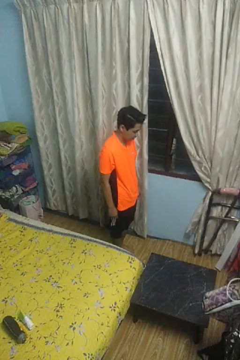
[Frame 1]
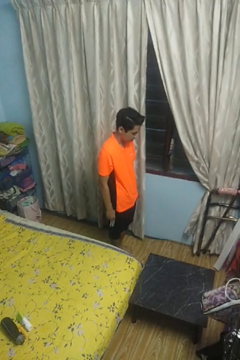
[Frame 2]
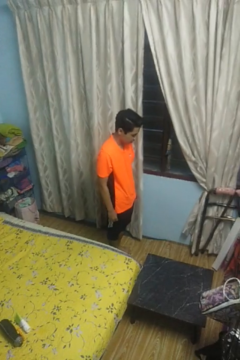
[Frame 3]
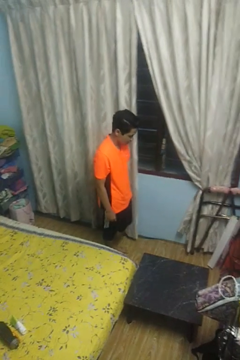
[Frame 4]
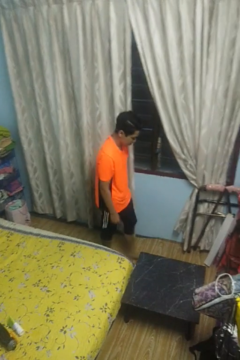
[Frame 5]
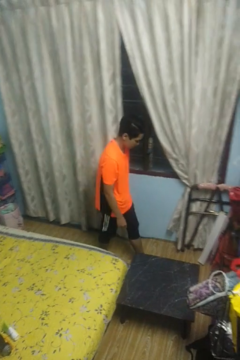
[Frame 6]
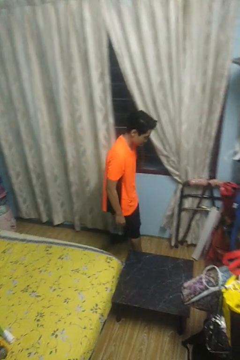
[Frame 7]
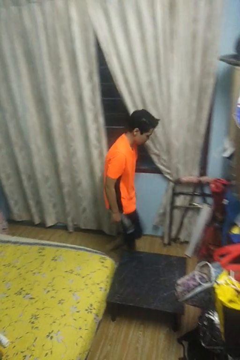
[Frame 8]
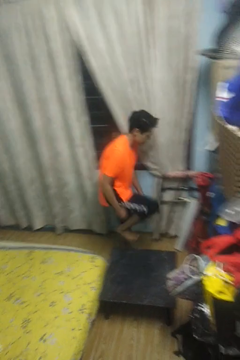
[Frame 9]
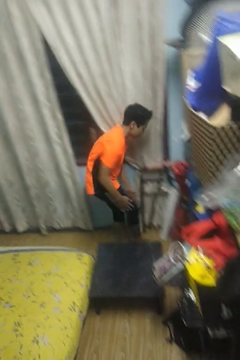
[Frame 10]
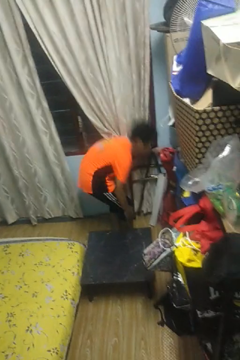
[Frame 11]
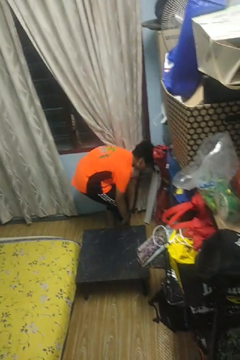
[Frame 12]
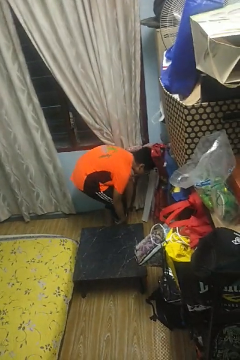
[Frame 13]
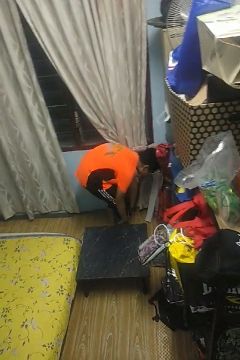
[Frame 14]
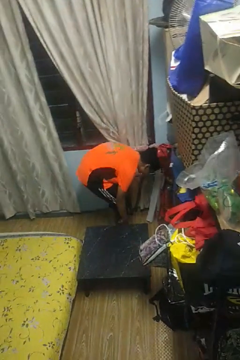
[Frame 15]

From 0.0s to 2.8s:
person bumps into table

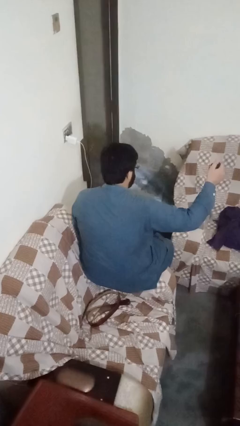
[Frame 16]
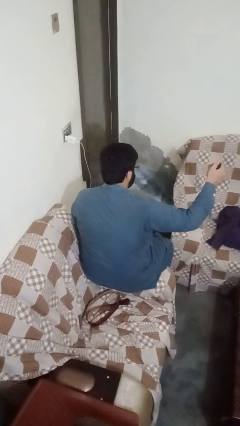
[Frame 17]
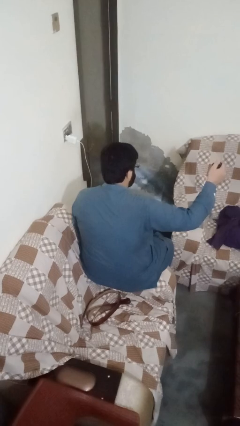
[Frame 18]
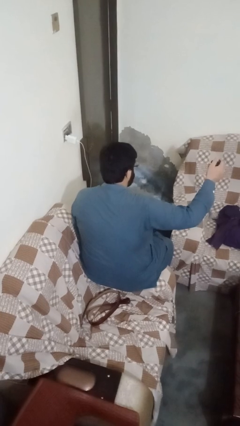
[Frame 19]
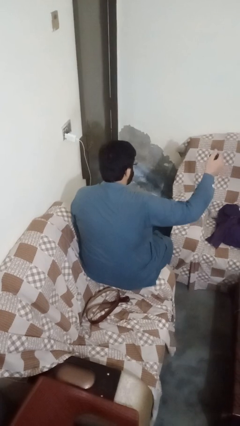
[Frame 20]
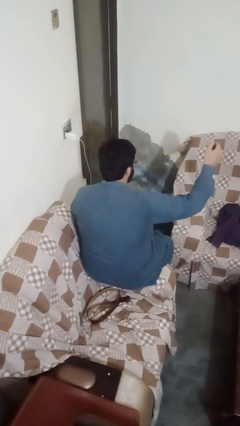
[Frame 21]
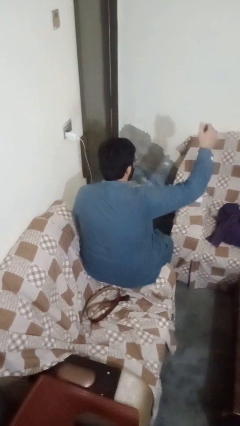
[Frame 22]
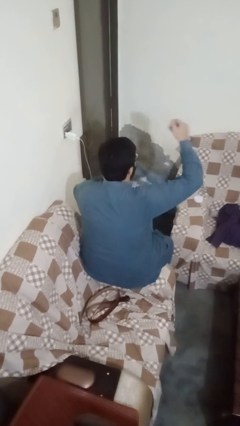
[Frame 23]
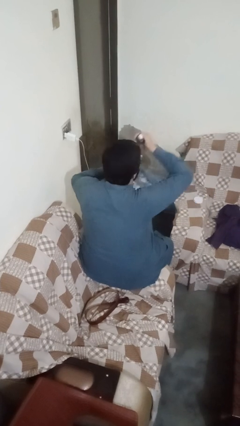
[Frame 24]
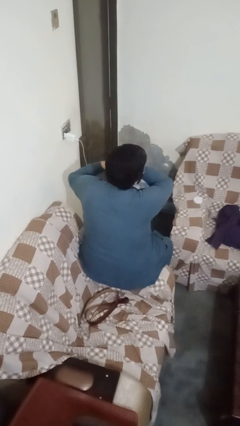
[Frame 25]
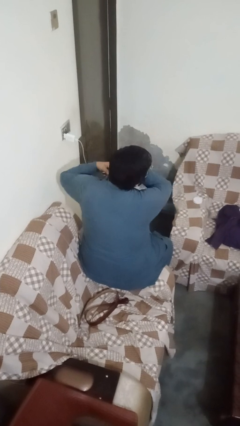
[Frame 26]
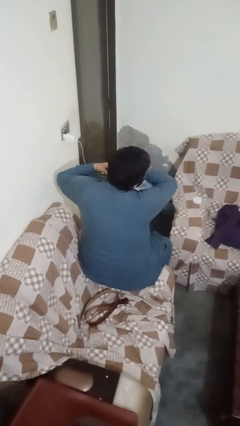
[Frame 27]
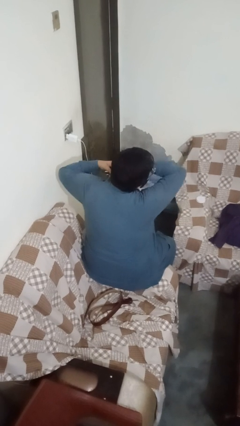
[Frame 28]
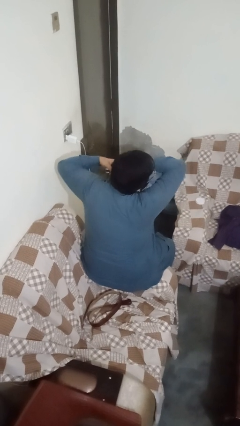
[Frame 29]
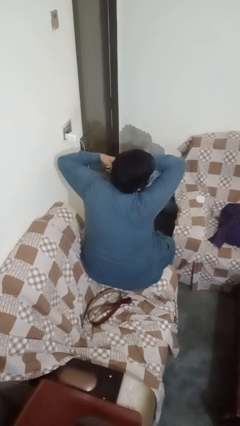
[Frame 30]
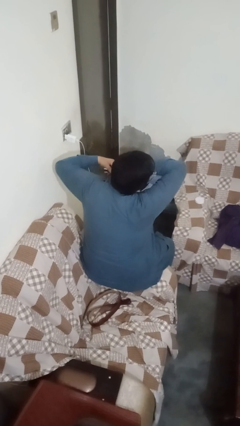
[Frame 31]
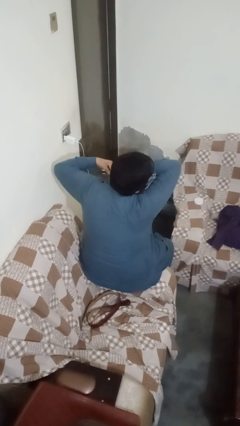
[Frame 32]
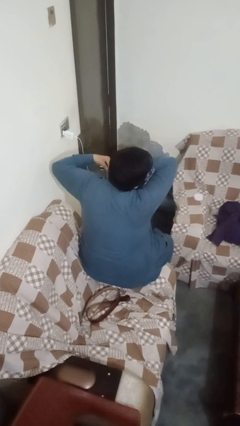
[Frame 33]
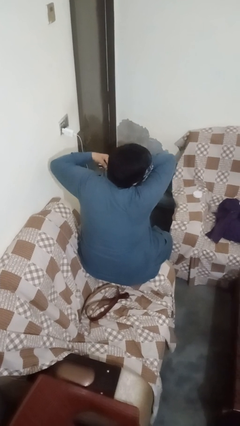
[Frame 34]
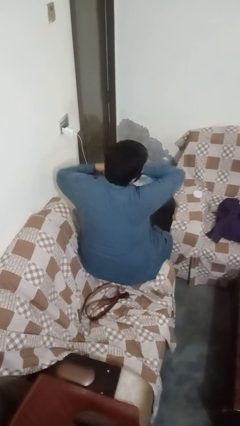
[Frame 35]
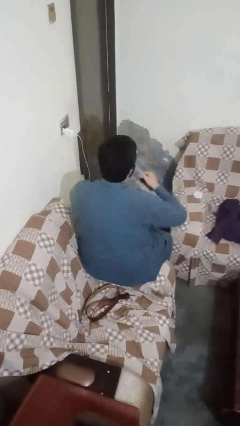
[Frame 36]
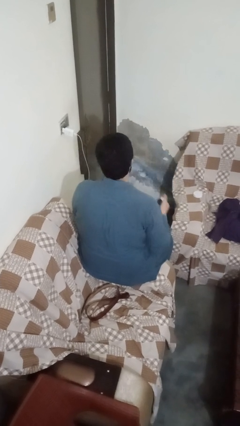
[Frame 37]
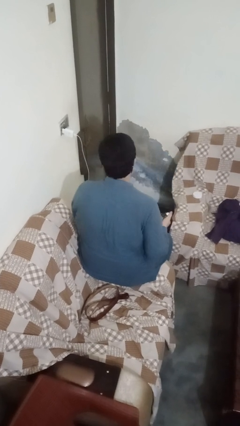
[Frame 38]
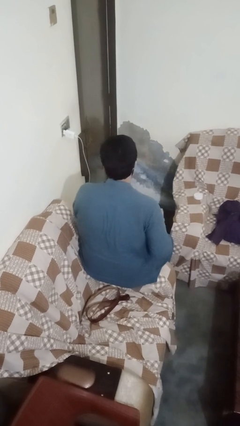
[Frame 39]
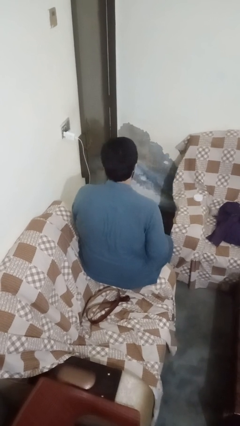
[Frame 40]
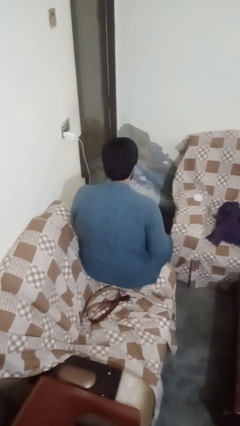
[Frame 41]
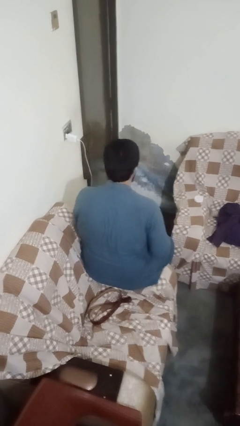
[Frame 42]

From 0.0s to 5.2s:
person applies deodorant

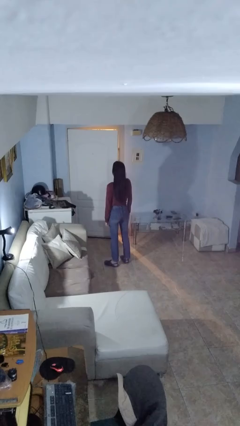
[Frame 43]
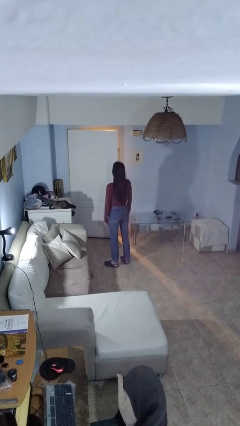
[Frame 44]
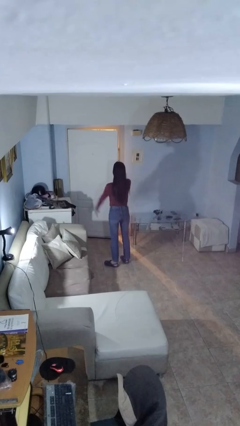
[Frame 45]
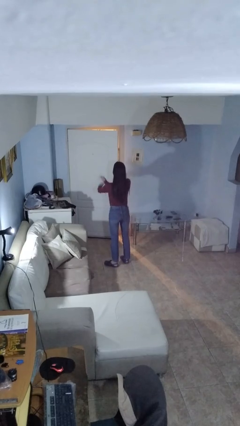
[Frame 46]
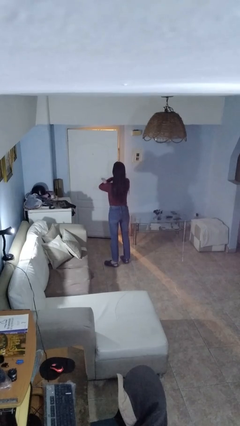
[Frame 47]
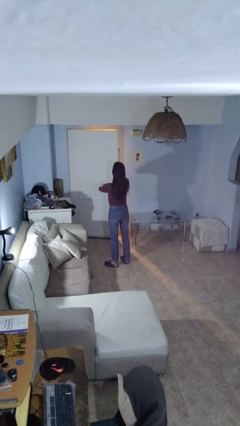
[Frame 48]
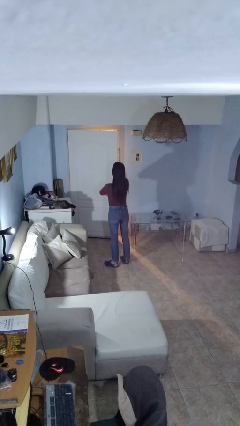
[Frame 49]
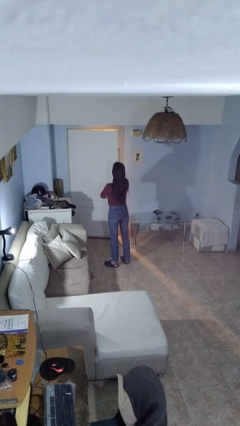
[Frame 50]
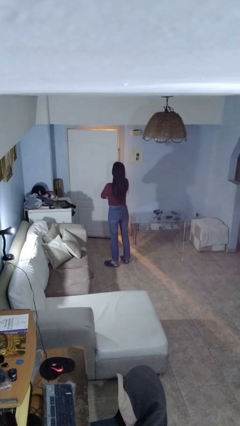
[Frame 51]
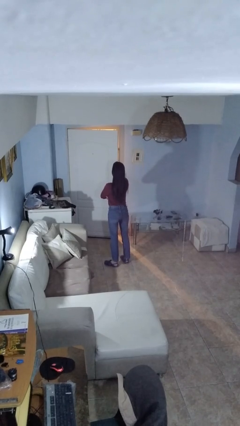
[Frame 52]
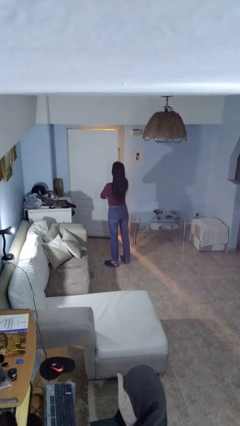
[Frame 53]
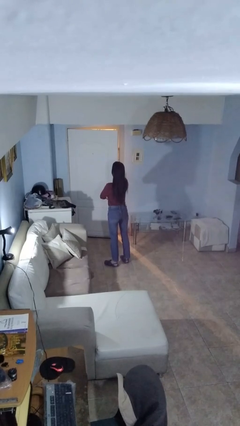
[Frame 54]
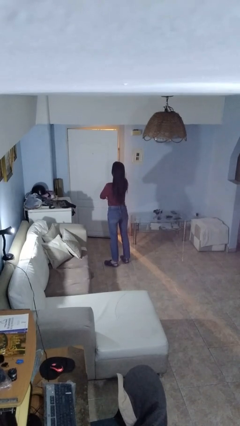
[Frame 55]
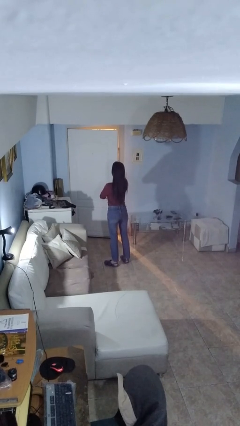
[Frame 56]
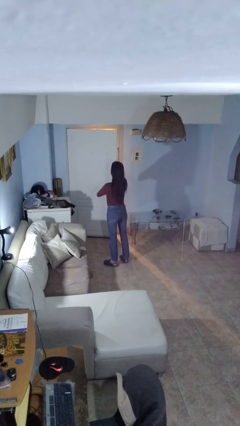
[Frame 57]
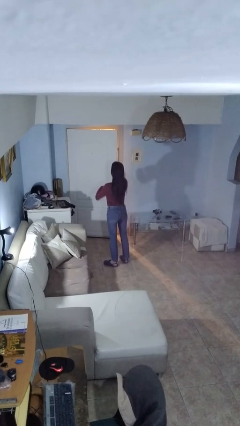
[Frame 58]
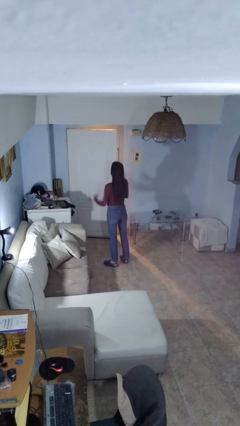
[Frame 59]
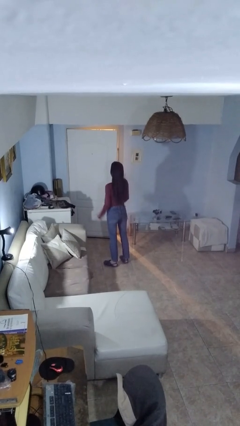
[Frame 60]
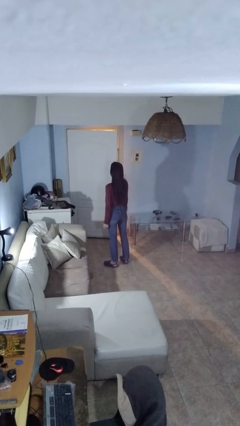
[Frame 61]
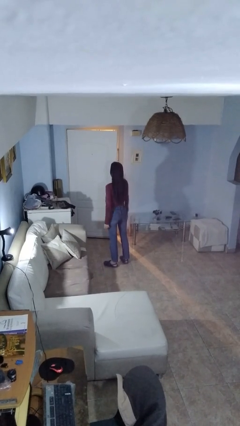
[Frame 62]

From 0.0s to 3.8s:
person crosses arms

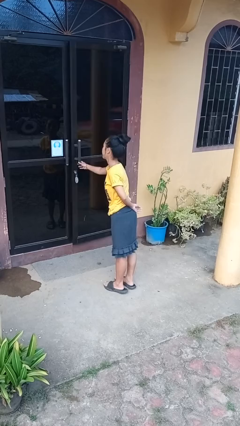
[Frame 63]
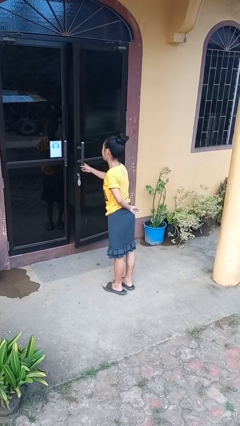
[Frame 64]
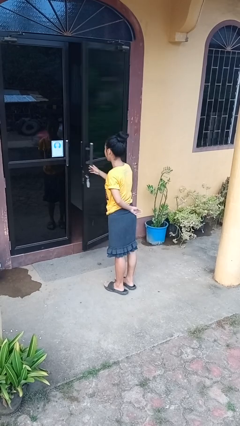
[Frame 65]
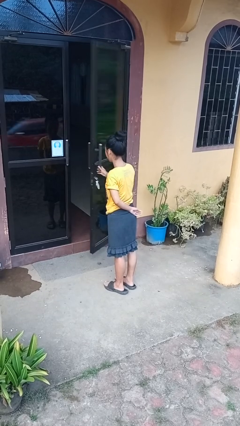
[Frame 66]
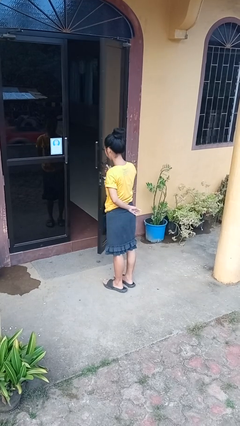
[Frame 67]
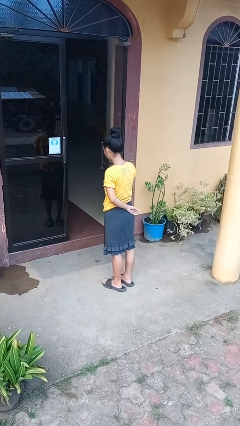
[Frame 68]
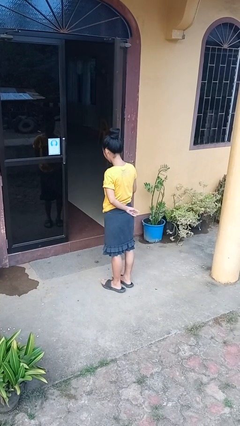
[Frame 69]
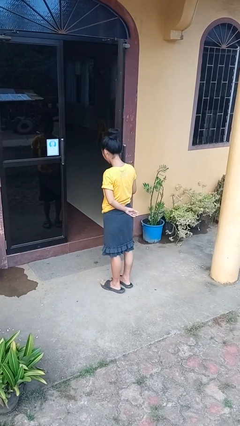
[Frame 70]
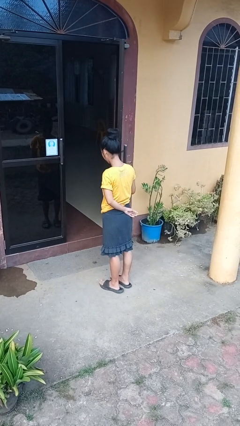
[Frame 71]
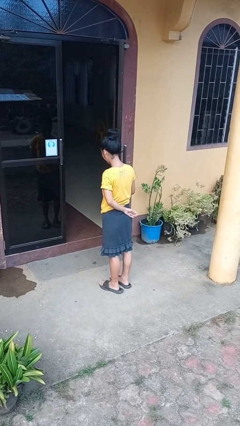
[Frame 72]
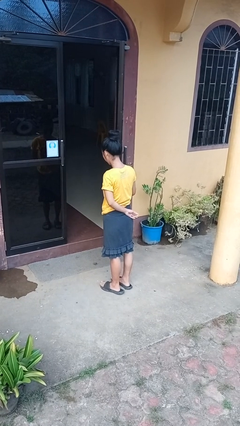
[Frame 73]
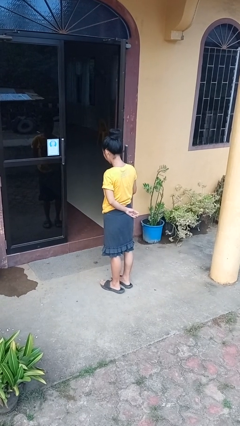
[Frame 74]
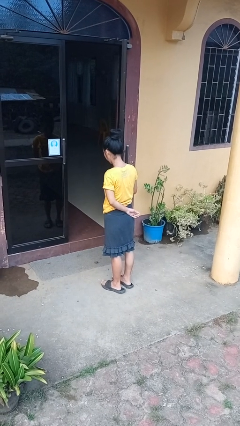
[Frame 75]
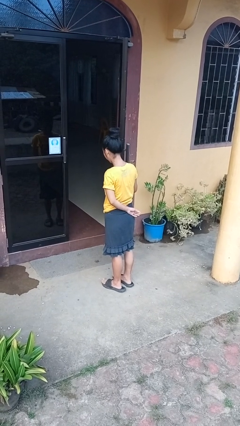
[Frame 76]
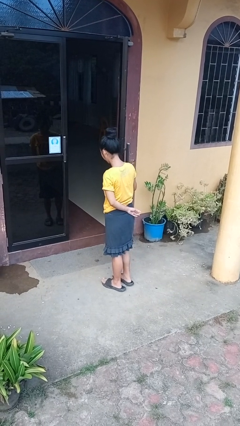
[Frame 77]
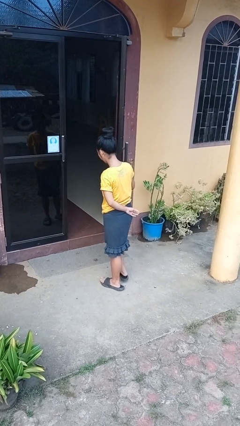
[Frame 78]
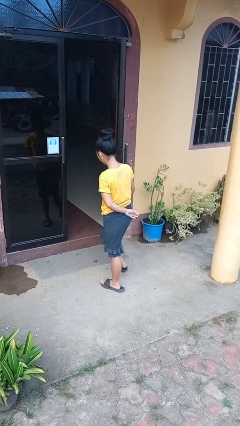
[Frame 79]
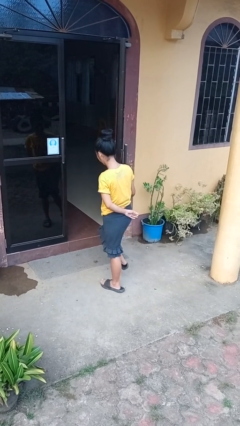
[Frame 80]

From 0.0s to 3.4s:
person opens facility door

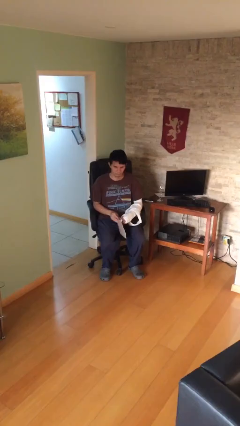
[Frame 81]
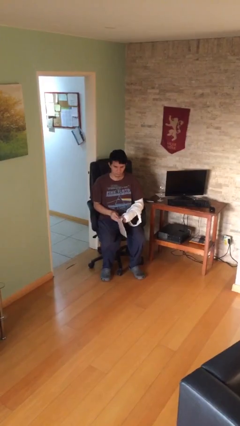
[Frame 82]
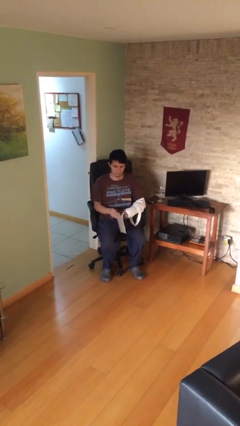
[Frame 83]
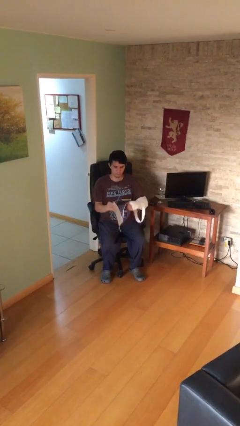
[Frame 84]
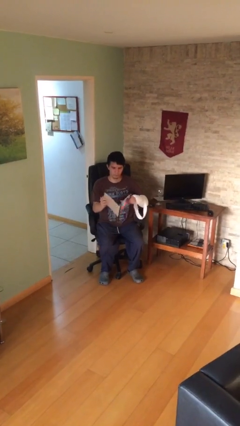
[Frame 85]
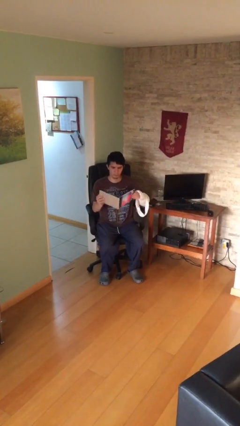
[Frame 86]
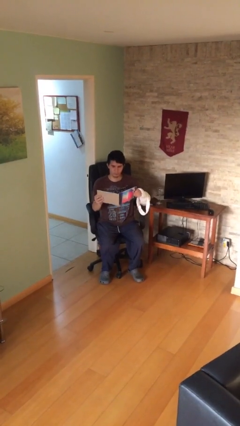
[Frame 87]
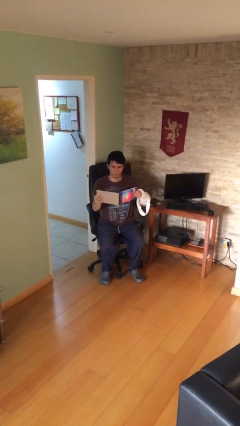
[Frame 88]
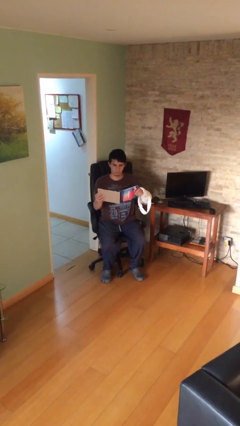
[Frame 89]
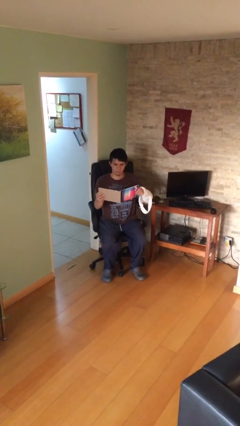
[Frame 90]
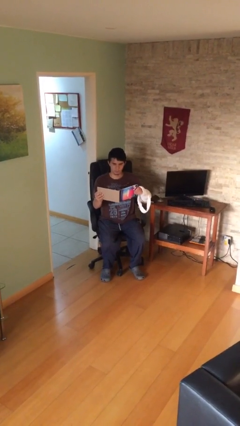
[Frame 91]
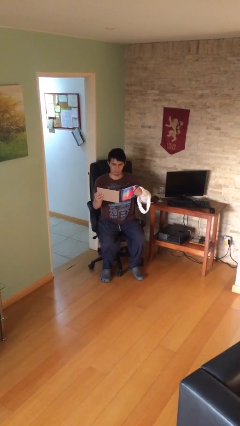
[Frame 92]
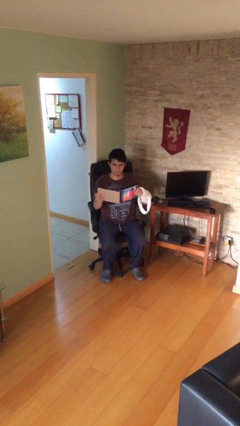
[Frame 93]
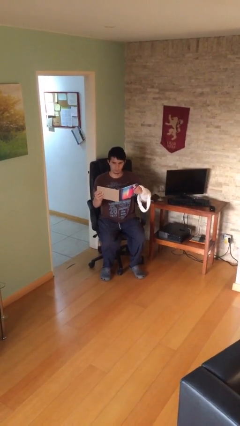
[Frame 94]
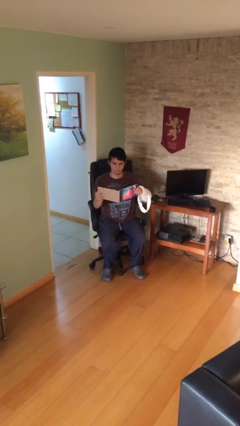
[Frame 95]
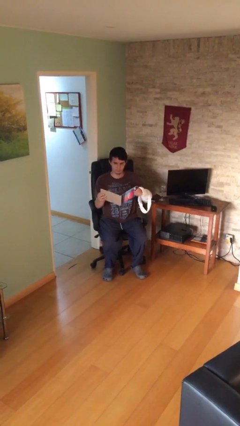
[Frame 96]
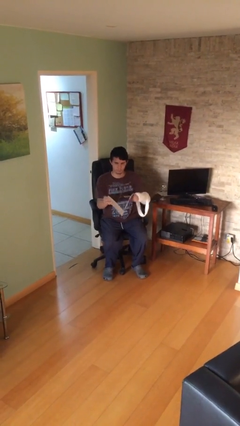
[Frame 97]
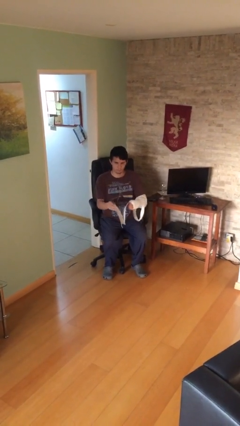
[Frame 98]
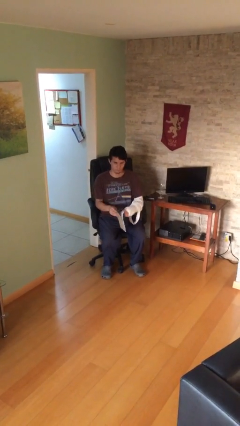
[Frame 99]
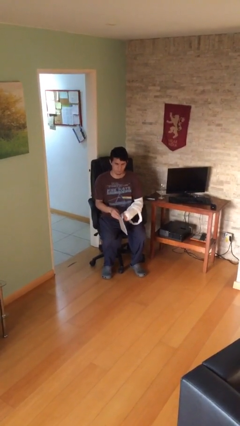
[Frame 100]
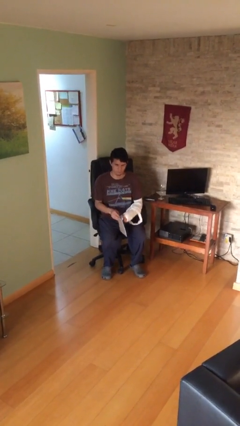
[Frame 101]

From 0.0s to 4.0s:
person reads document
